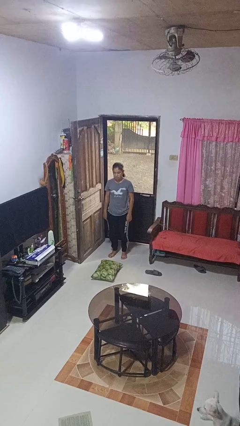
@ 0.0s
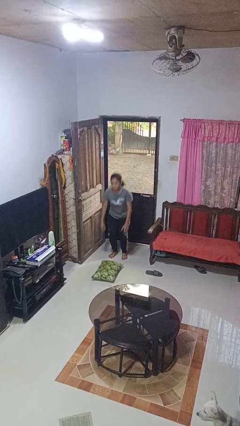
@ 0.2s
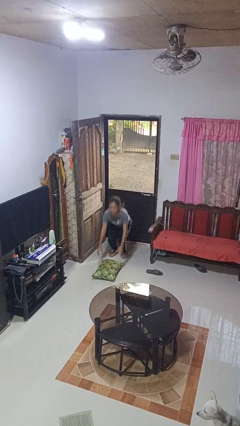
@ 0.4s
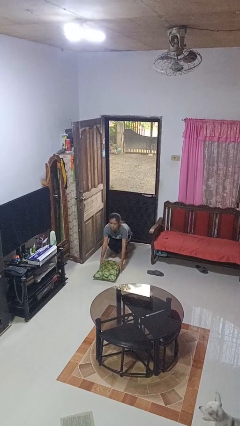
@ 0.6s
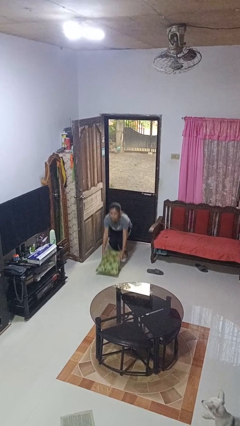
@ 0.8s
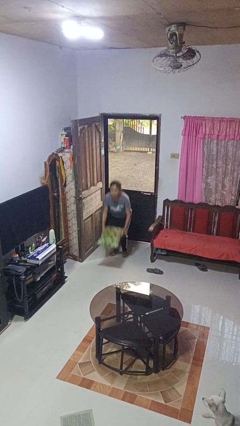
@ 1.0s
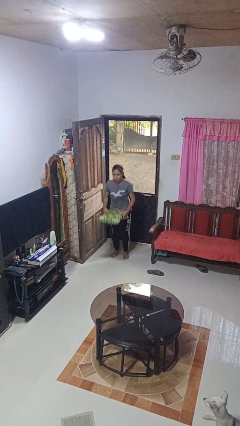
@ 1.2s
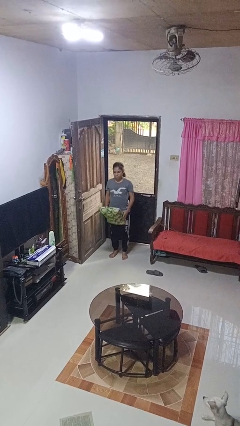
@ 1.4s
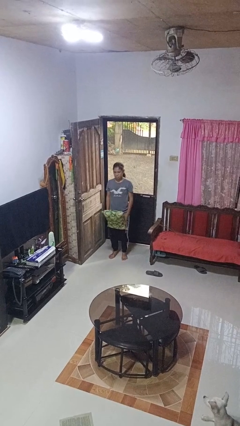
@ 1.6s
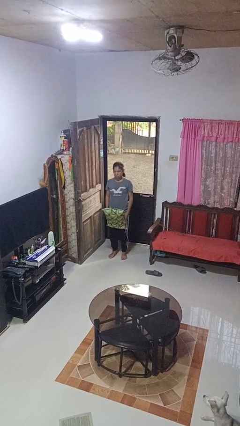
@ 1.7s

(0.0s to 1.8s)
person picks up object from floor

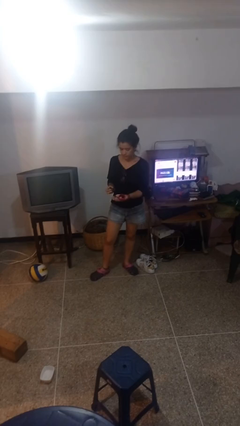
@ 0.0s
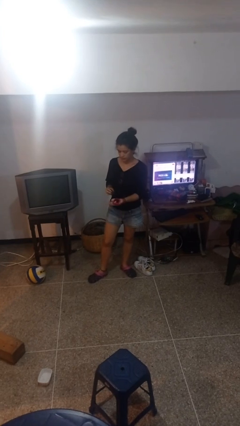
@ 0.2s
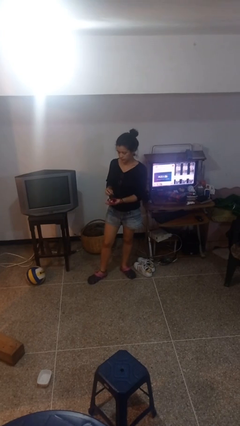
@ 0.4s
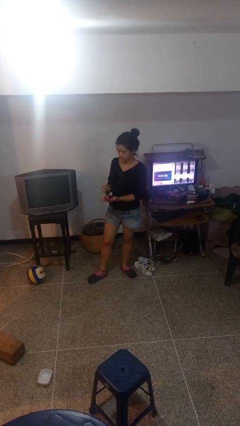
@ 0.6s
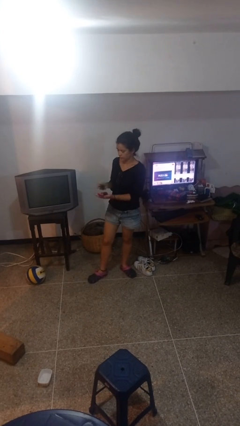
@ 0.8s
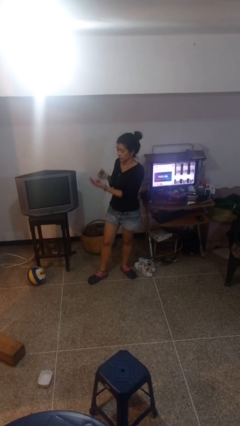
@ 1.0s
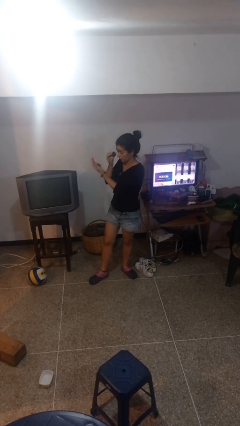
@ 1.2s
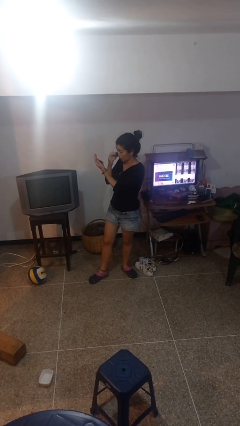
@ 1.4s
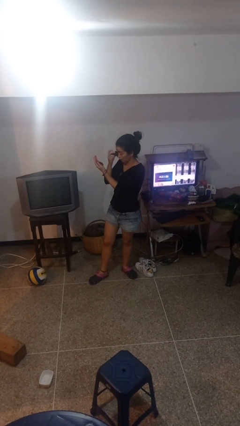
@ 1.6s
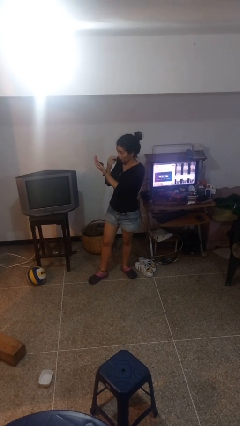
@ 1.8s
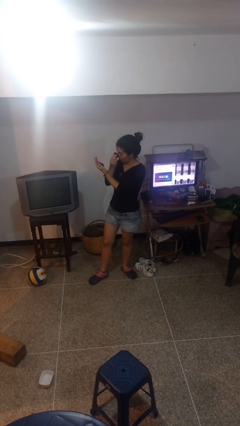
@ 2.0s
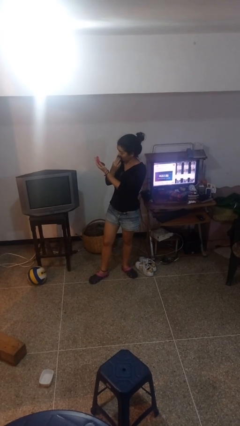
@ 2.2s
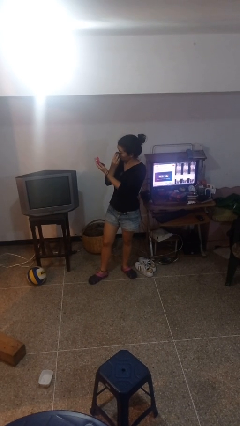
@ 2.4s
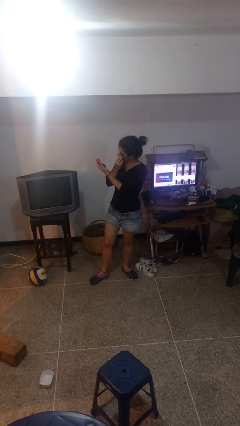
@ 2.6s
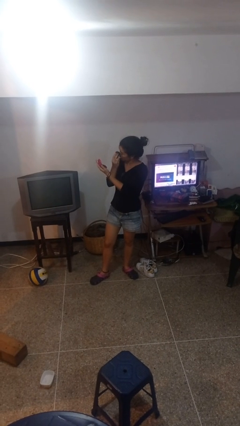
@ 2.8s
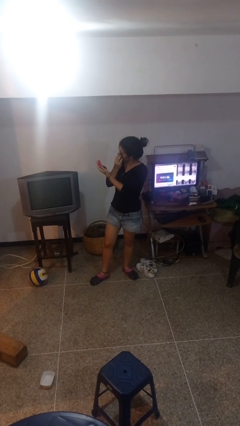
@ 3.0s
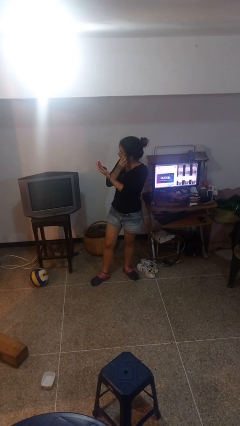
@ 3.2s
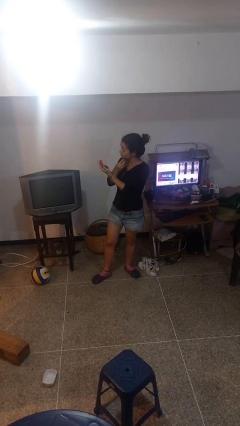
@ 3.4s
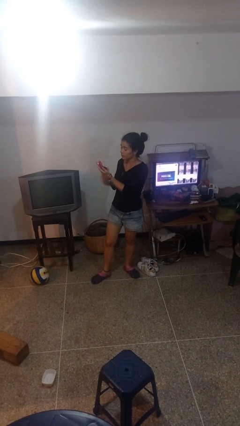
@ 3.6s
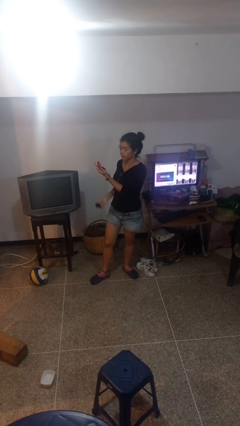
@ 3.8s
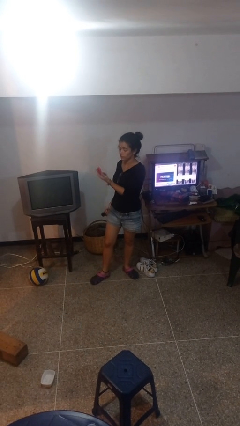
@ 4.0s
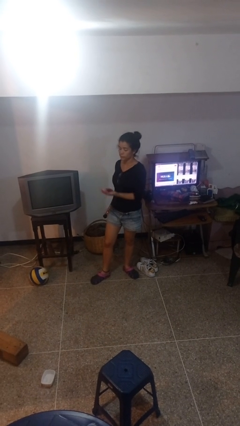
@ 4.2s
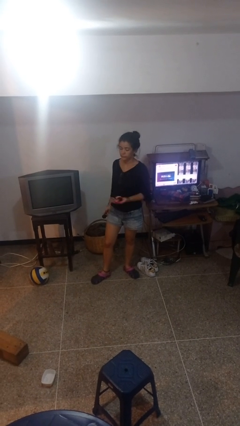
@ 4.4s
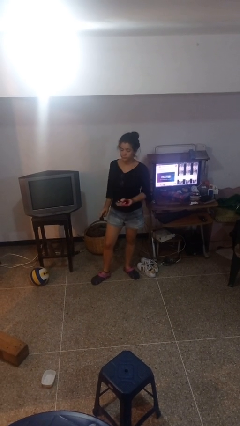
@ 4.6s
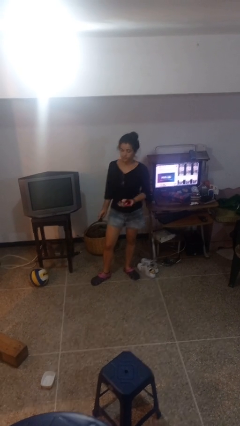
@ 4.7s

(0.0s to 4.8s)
person applies foundation makeup

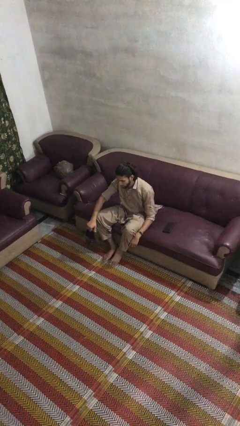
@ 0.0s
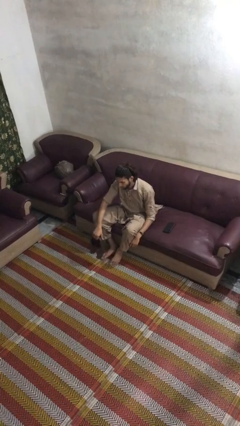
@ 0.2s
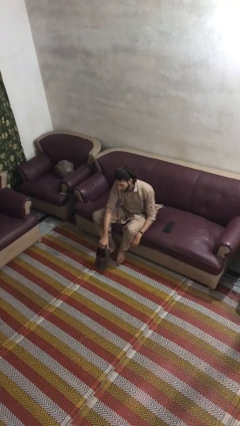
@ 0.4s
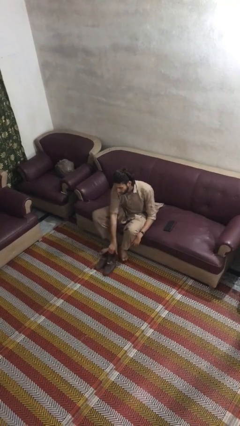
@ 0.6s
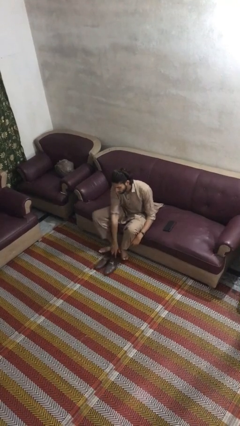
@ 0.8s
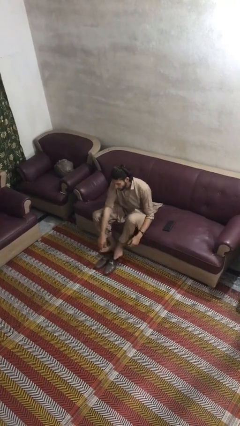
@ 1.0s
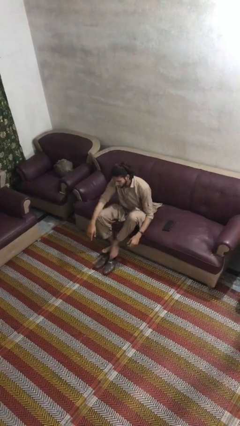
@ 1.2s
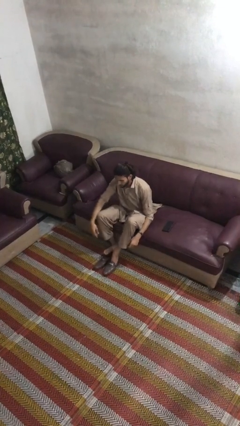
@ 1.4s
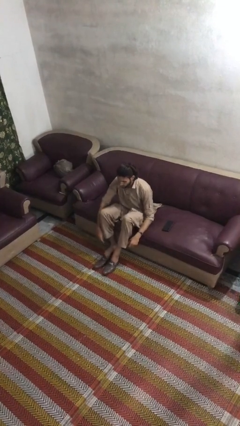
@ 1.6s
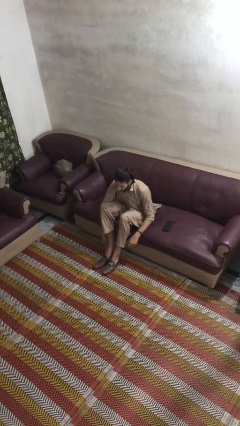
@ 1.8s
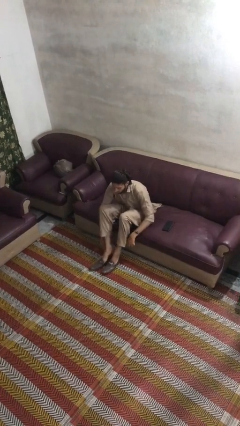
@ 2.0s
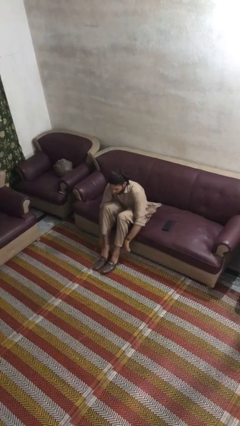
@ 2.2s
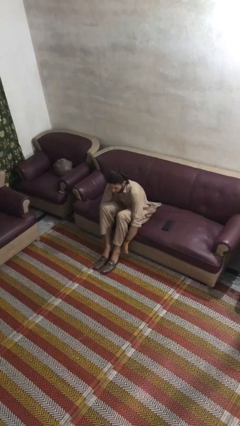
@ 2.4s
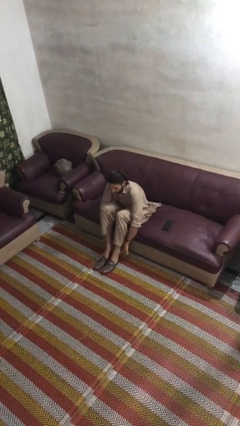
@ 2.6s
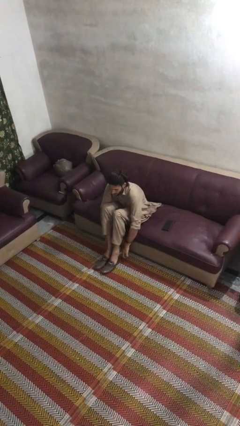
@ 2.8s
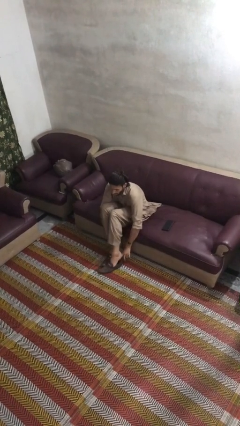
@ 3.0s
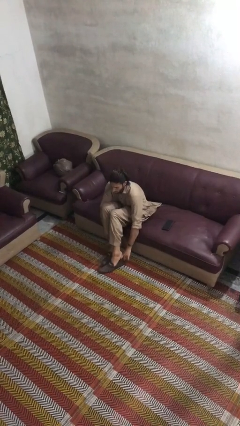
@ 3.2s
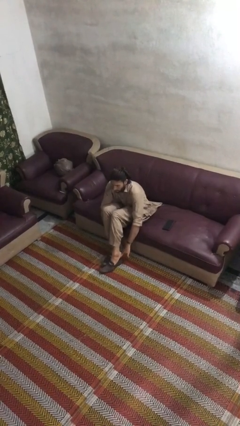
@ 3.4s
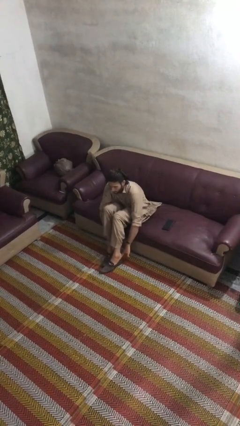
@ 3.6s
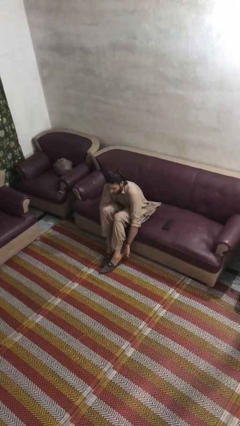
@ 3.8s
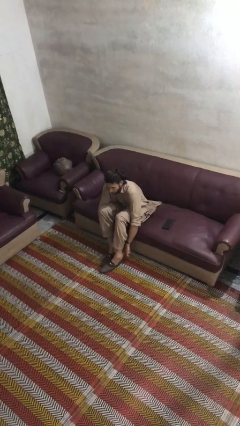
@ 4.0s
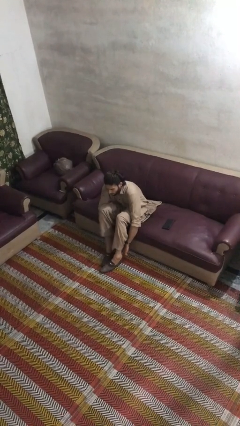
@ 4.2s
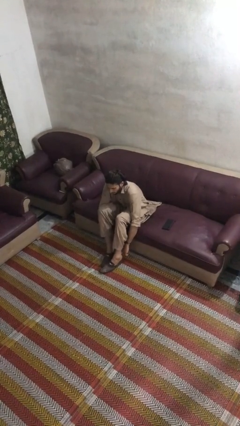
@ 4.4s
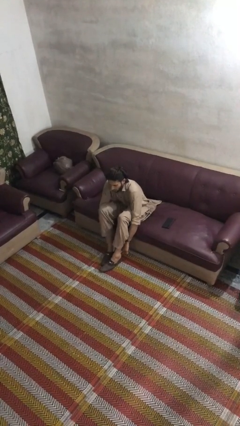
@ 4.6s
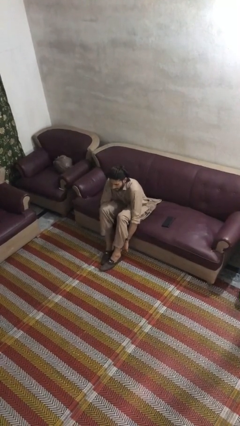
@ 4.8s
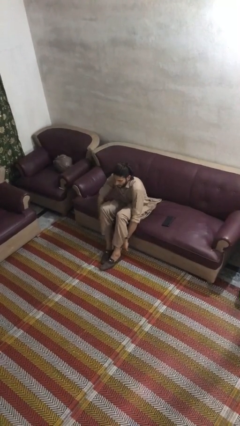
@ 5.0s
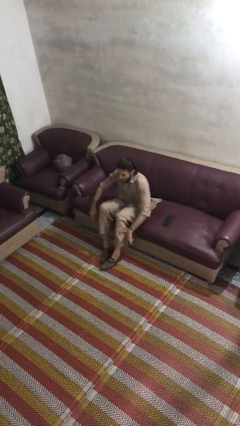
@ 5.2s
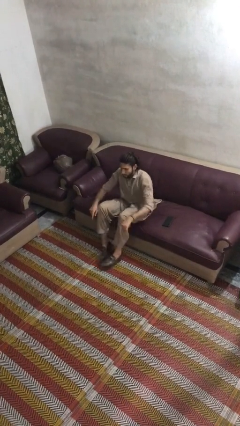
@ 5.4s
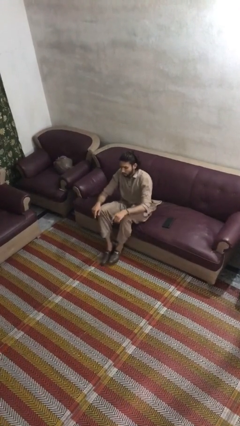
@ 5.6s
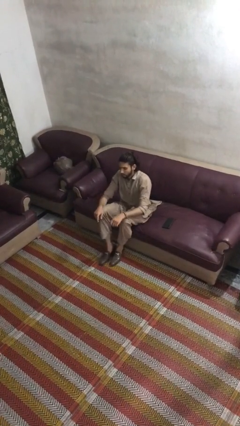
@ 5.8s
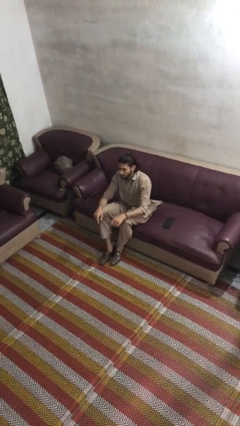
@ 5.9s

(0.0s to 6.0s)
person puts on shoes

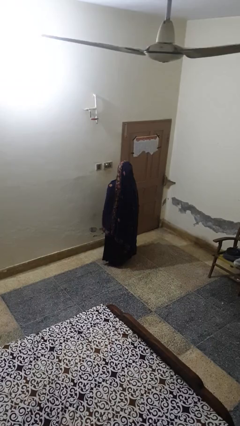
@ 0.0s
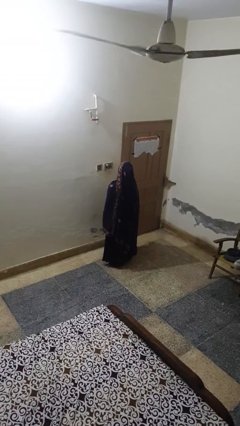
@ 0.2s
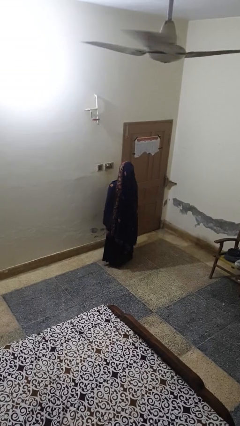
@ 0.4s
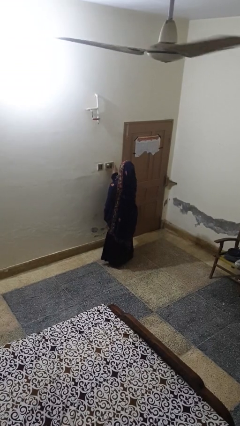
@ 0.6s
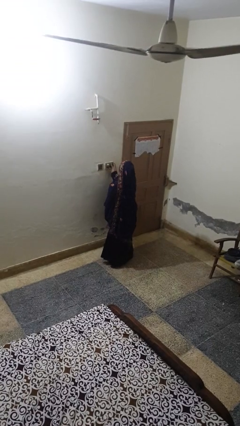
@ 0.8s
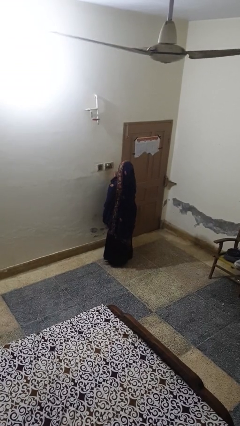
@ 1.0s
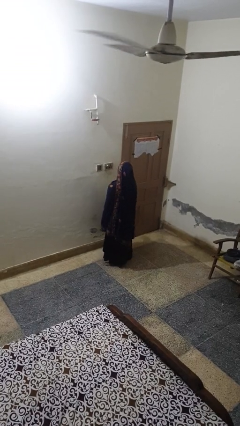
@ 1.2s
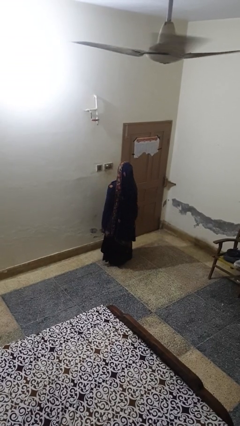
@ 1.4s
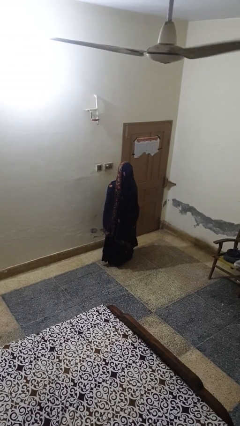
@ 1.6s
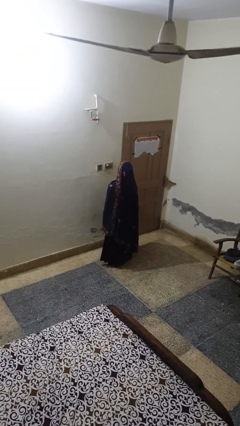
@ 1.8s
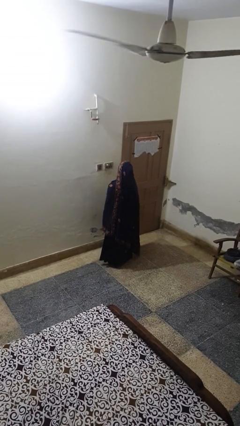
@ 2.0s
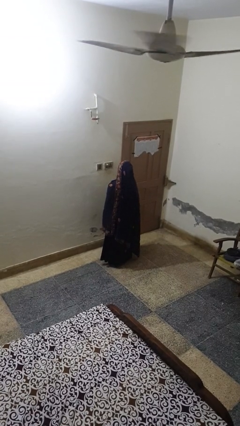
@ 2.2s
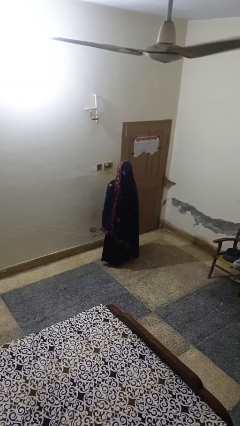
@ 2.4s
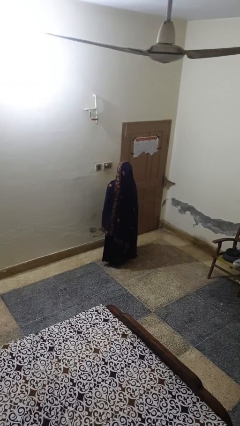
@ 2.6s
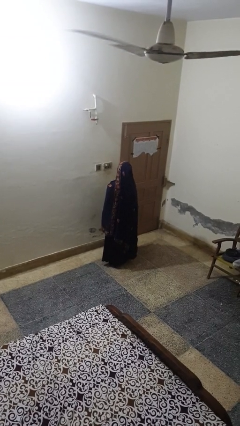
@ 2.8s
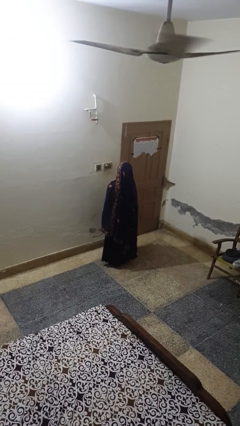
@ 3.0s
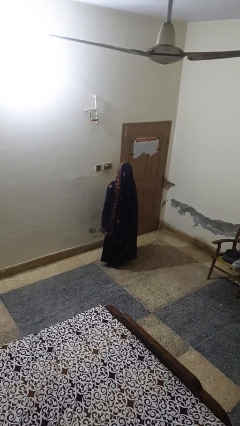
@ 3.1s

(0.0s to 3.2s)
person turns off fan

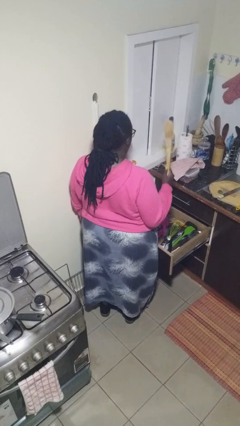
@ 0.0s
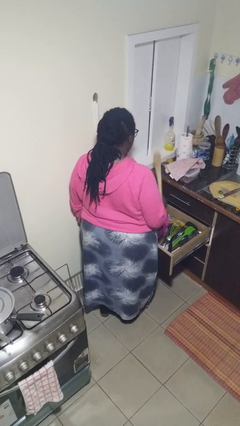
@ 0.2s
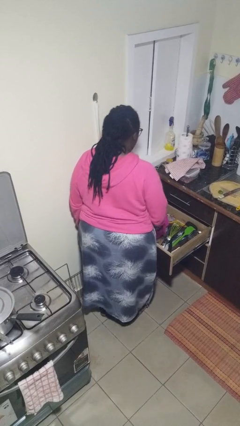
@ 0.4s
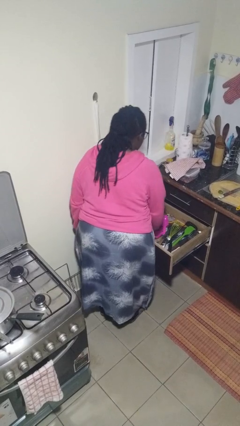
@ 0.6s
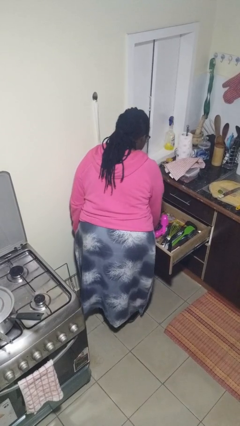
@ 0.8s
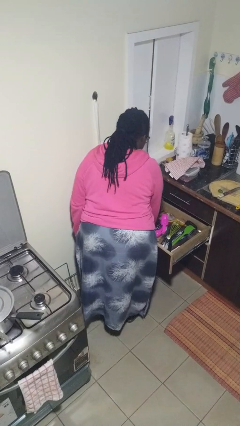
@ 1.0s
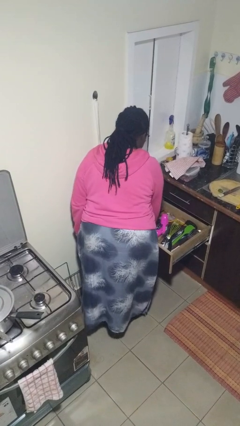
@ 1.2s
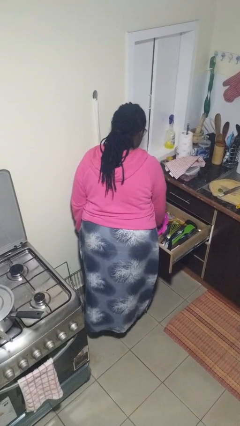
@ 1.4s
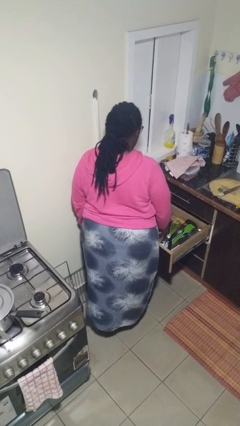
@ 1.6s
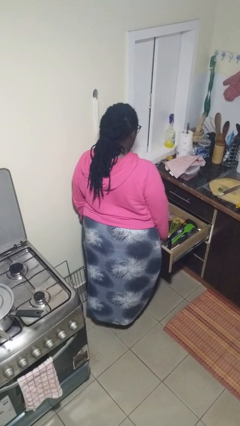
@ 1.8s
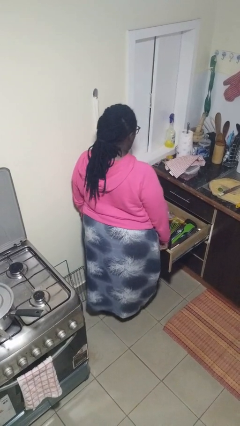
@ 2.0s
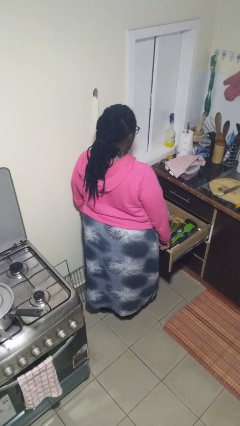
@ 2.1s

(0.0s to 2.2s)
person puts object into kitchen drawer
